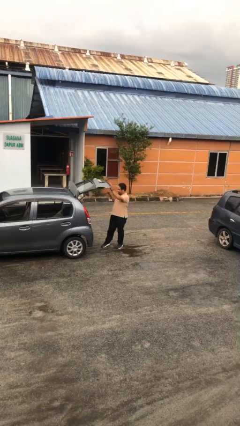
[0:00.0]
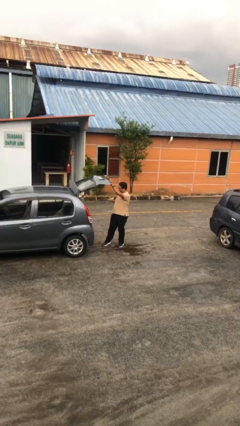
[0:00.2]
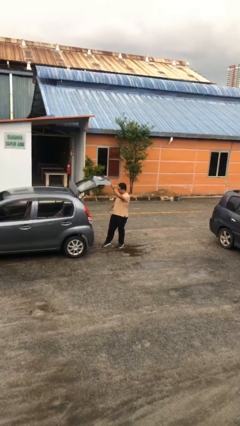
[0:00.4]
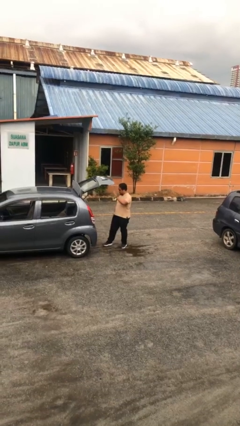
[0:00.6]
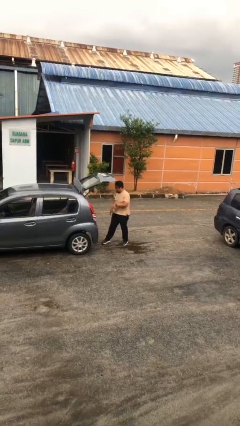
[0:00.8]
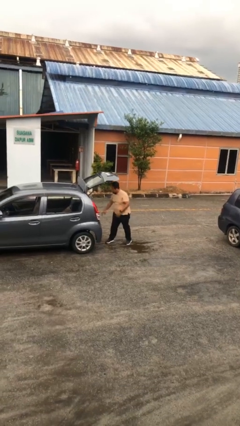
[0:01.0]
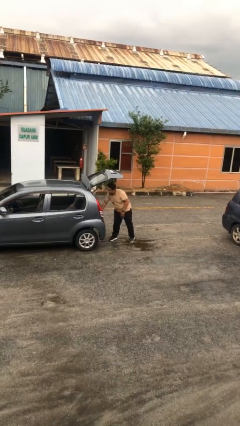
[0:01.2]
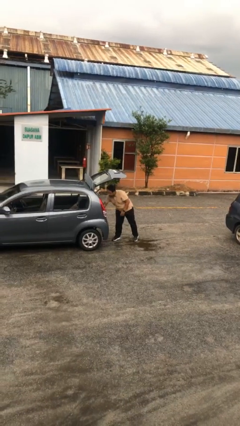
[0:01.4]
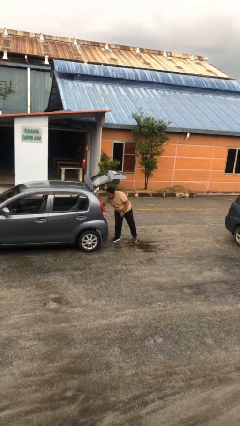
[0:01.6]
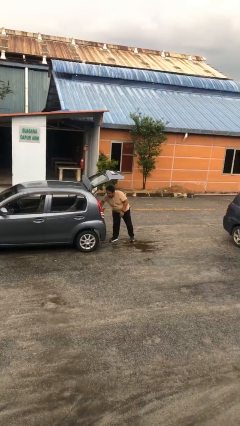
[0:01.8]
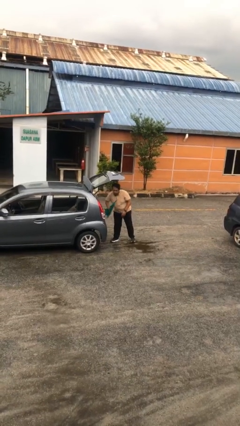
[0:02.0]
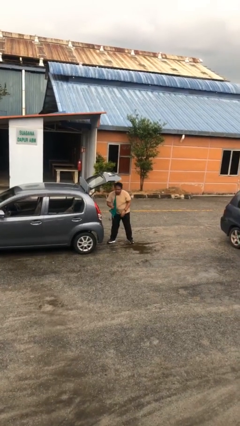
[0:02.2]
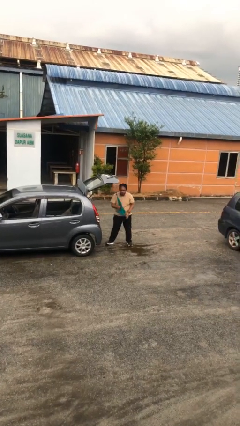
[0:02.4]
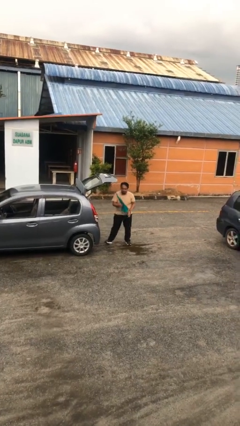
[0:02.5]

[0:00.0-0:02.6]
person unloads car

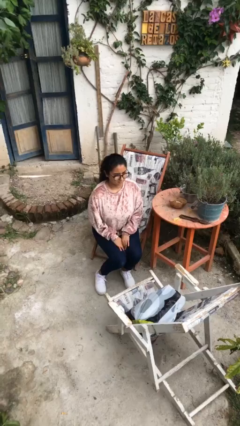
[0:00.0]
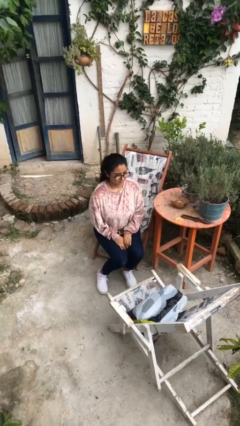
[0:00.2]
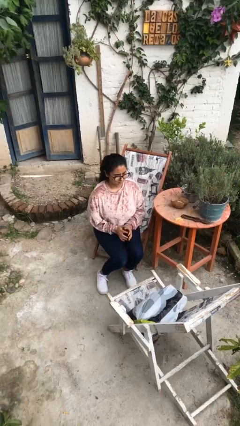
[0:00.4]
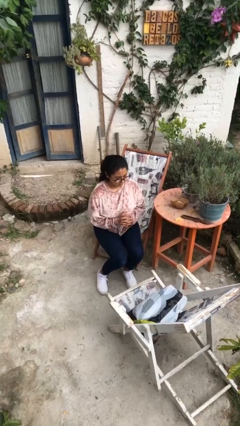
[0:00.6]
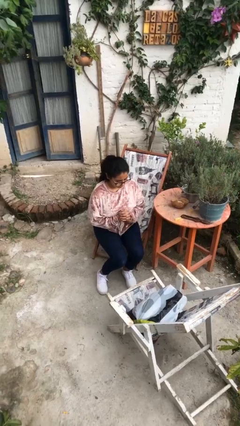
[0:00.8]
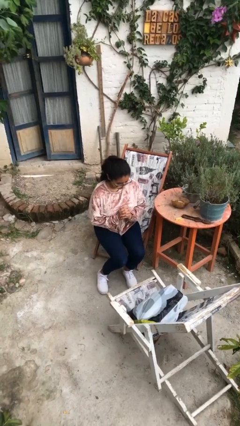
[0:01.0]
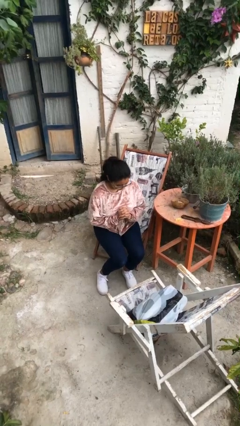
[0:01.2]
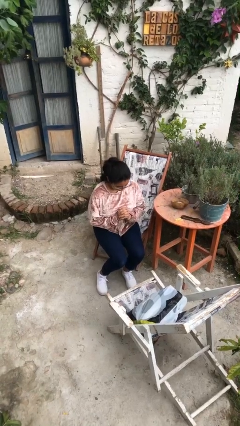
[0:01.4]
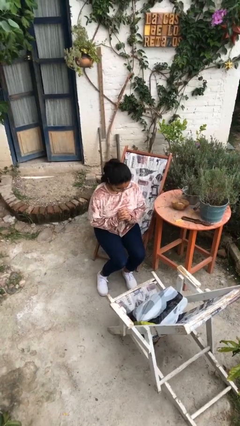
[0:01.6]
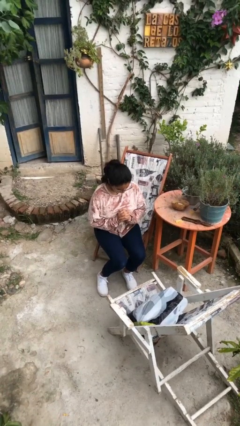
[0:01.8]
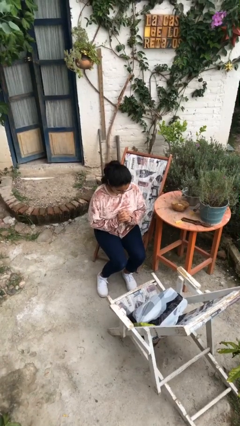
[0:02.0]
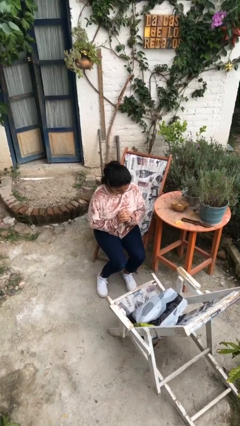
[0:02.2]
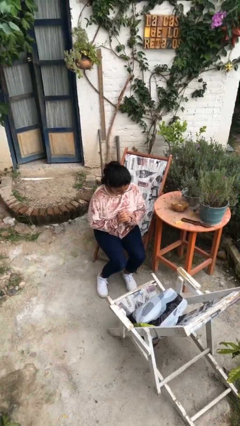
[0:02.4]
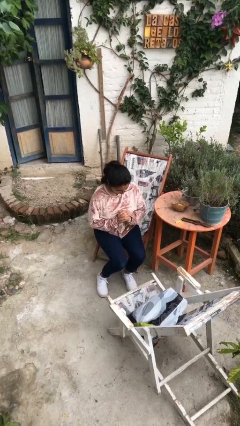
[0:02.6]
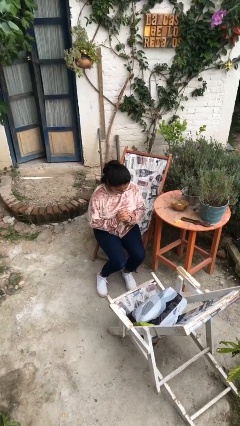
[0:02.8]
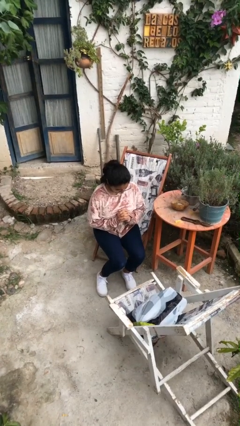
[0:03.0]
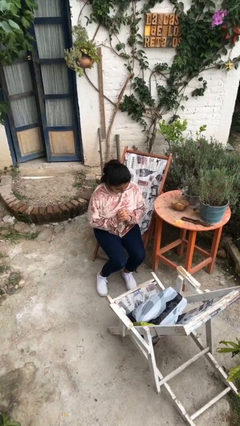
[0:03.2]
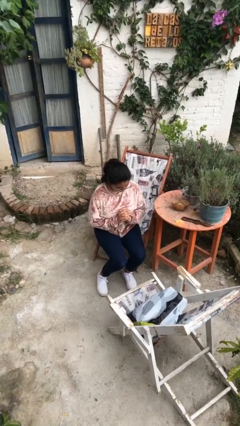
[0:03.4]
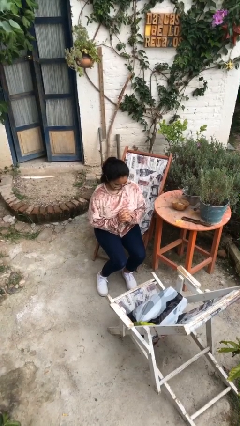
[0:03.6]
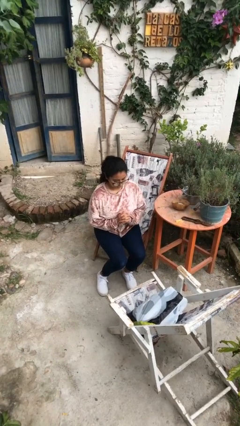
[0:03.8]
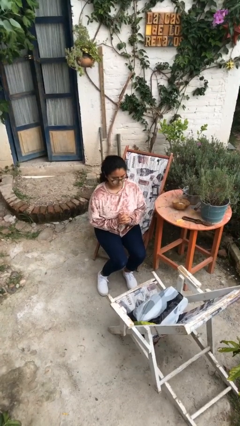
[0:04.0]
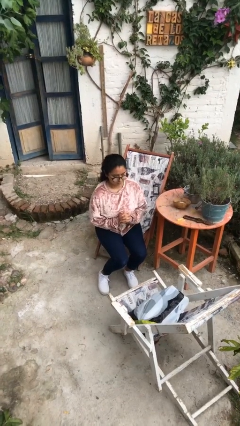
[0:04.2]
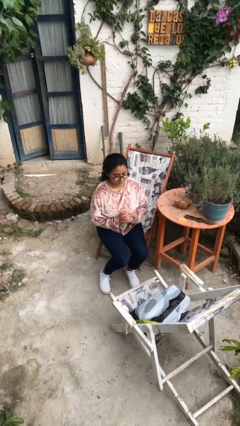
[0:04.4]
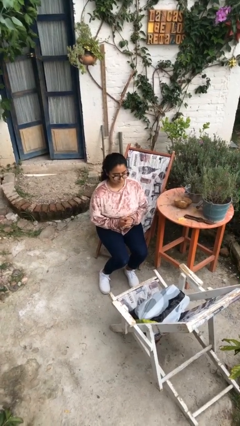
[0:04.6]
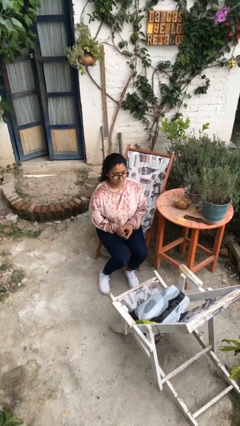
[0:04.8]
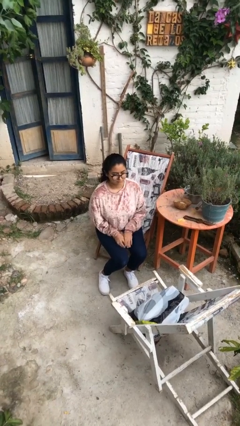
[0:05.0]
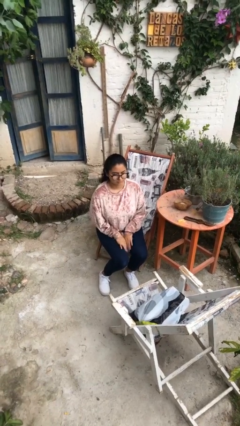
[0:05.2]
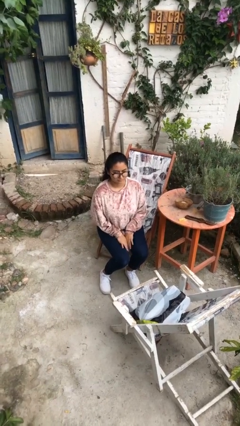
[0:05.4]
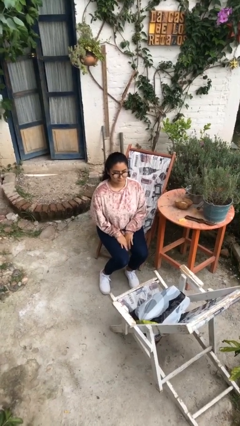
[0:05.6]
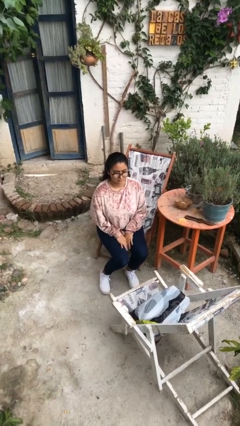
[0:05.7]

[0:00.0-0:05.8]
person prays

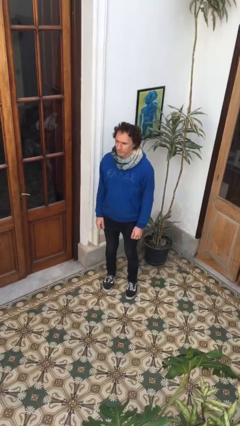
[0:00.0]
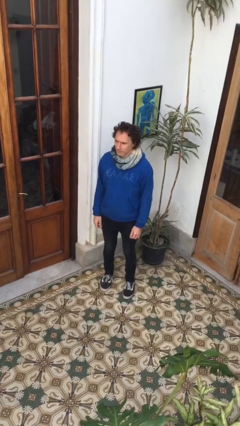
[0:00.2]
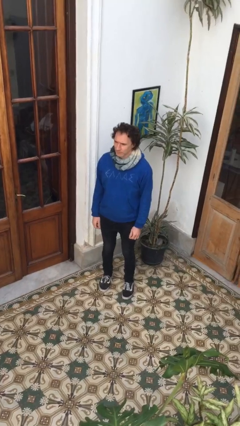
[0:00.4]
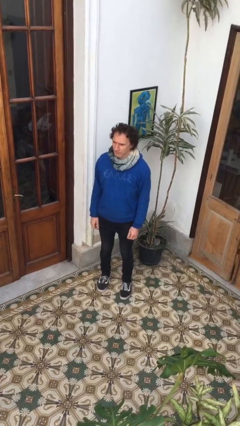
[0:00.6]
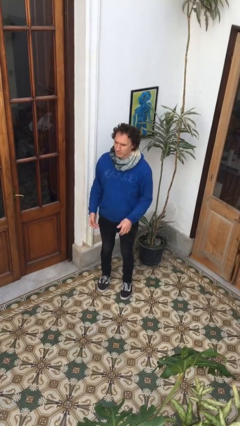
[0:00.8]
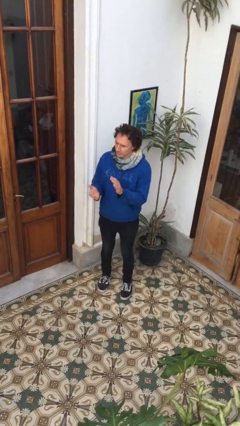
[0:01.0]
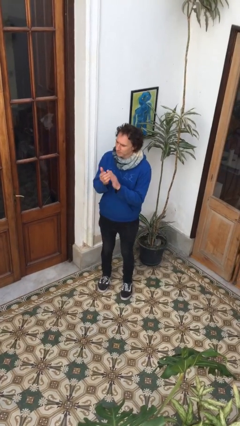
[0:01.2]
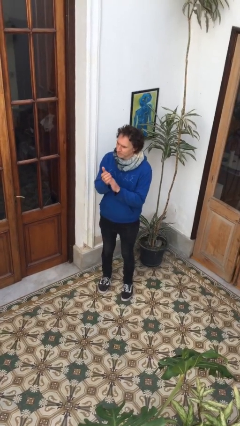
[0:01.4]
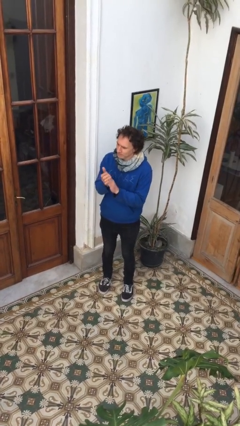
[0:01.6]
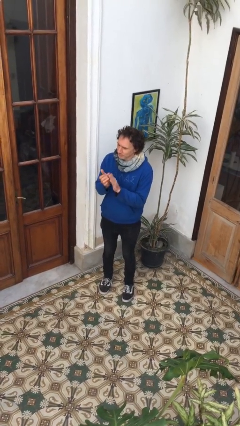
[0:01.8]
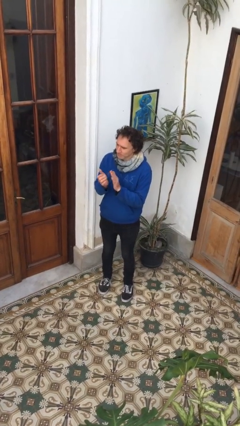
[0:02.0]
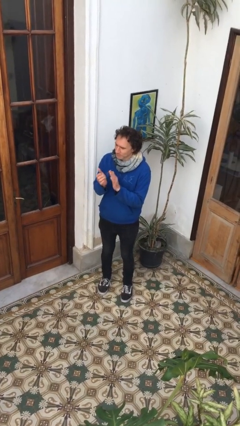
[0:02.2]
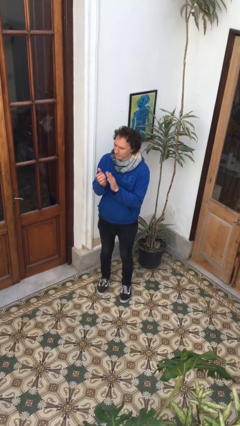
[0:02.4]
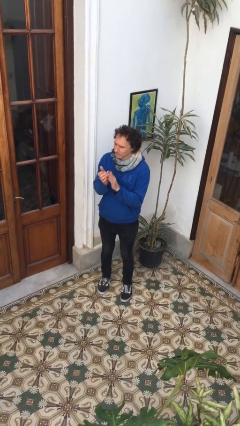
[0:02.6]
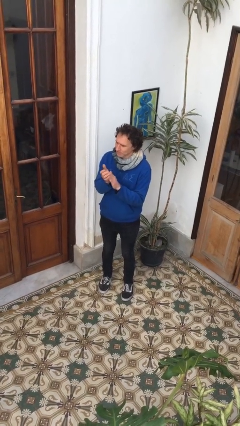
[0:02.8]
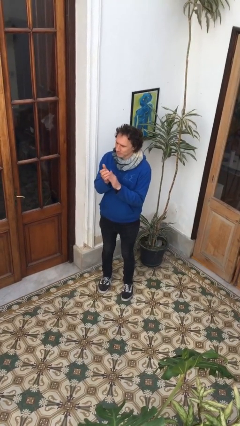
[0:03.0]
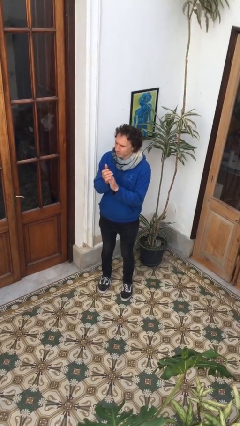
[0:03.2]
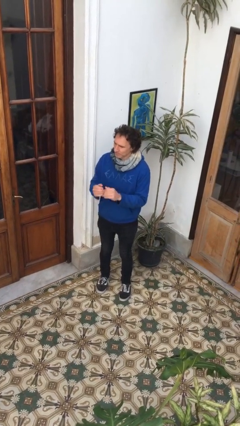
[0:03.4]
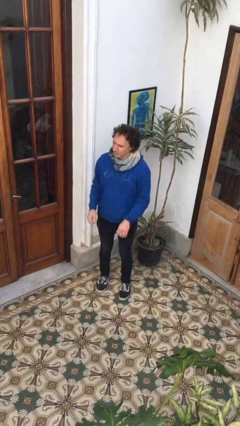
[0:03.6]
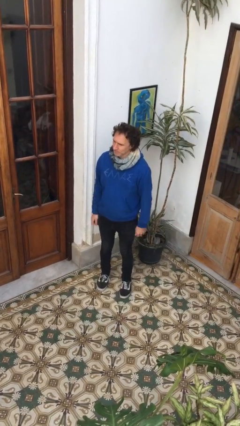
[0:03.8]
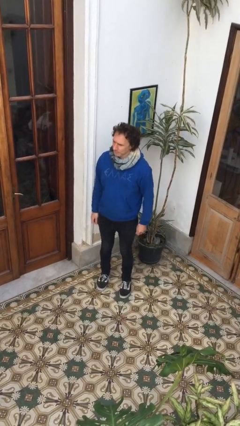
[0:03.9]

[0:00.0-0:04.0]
person claps hands

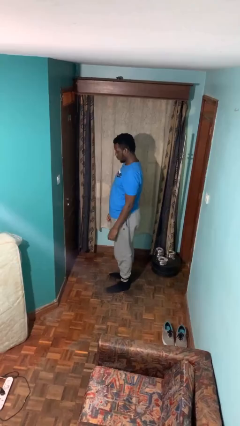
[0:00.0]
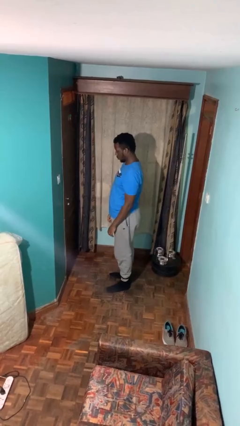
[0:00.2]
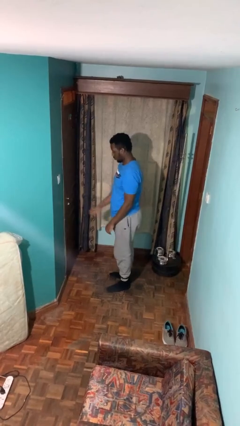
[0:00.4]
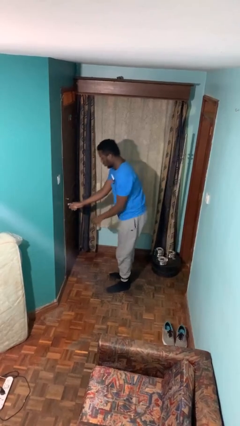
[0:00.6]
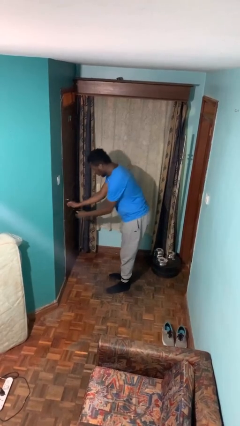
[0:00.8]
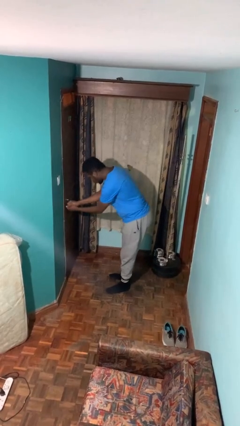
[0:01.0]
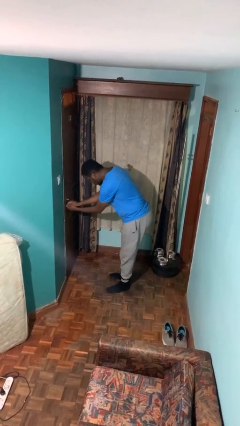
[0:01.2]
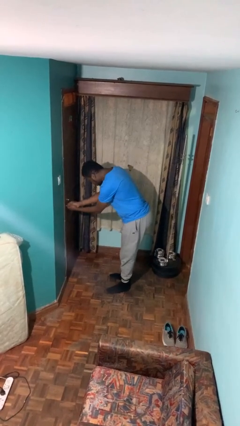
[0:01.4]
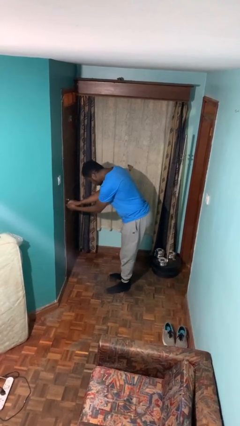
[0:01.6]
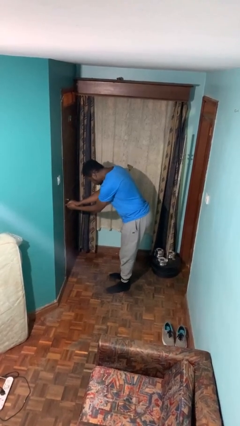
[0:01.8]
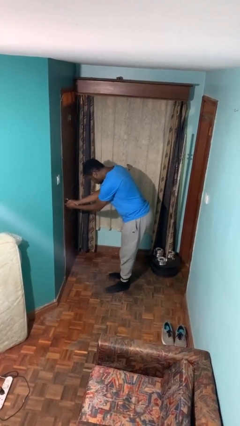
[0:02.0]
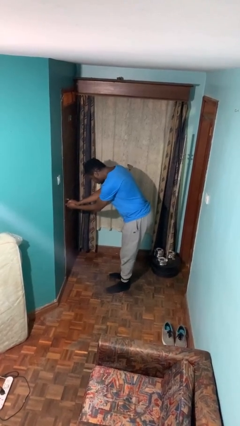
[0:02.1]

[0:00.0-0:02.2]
person locks door with keys

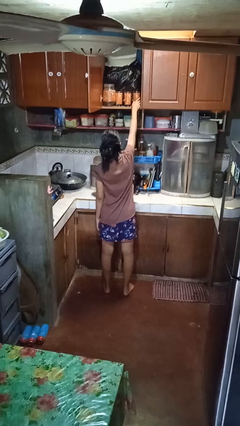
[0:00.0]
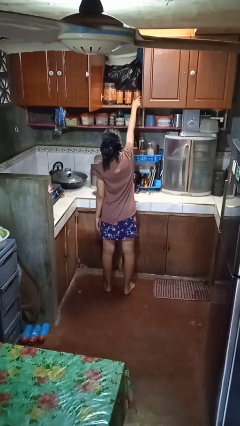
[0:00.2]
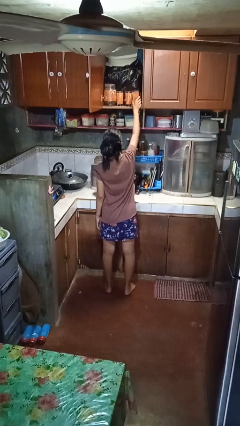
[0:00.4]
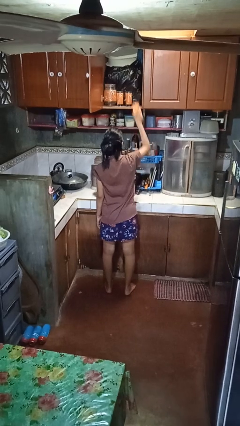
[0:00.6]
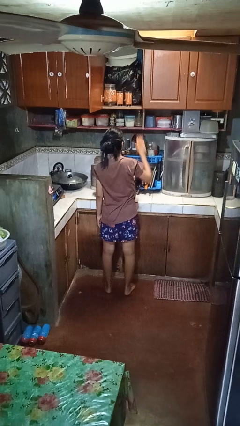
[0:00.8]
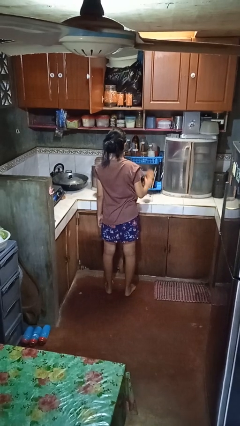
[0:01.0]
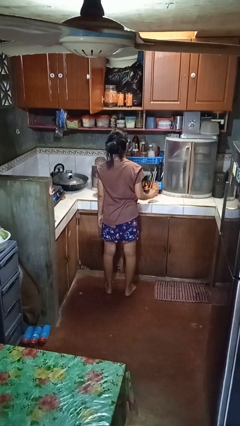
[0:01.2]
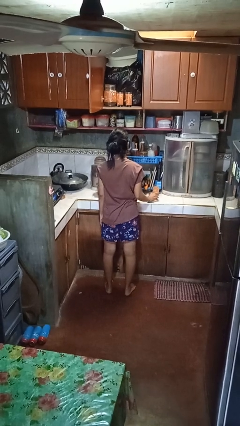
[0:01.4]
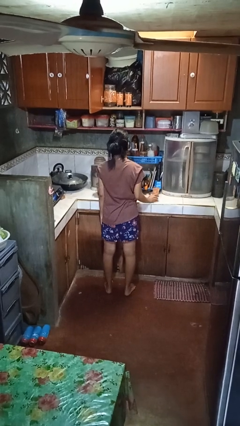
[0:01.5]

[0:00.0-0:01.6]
person takes object from cabinet

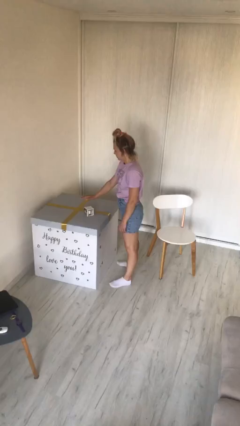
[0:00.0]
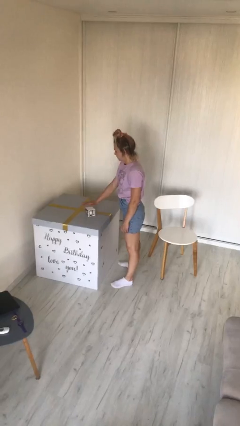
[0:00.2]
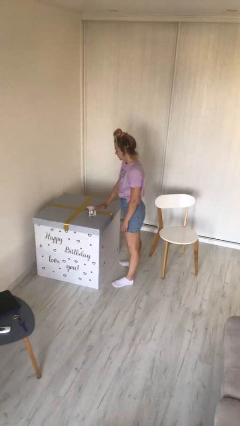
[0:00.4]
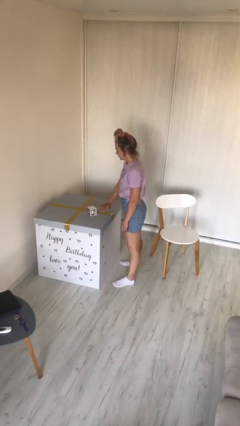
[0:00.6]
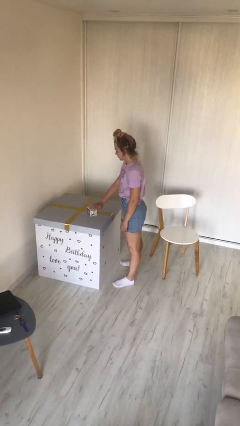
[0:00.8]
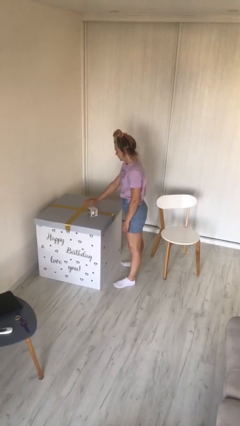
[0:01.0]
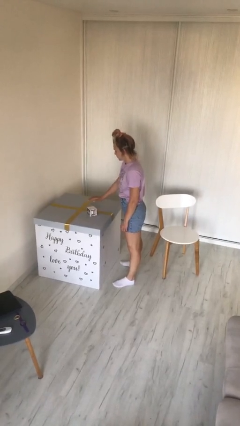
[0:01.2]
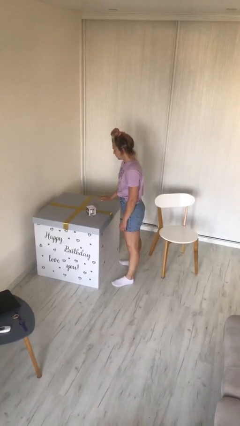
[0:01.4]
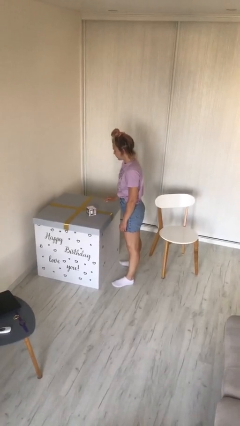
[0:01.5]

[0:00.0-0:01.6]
person waves hand over object
